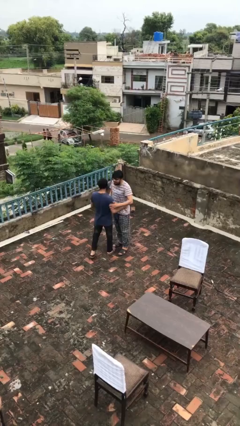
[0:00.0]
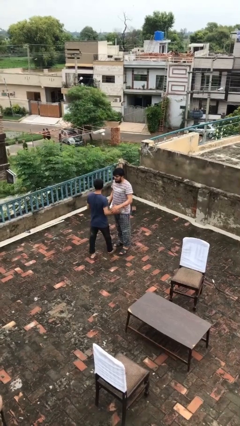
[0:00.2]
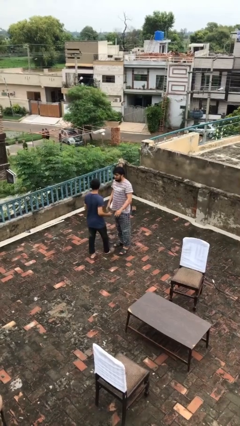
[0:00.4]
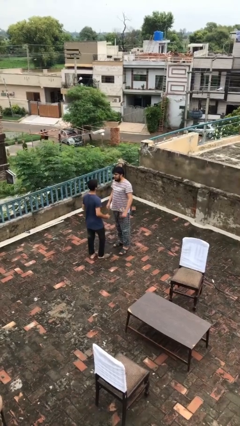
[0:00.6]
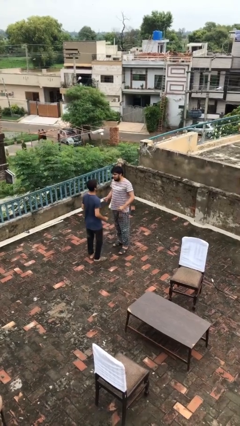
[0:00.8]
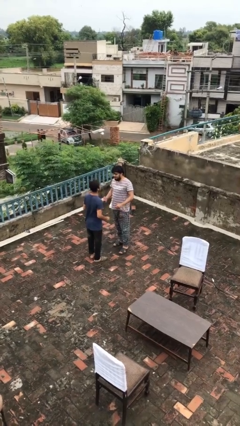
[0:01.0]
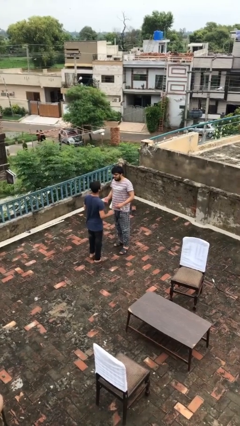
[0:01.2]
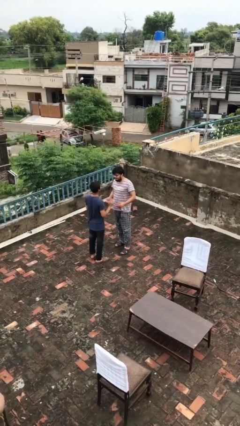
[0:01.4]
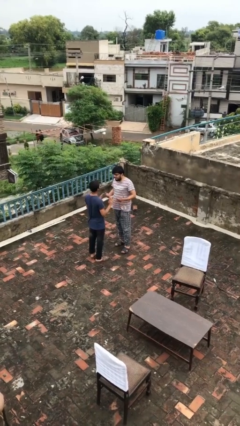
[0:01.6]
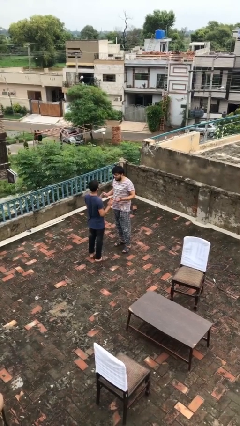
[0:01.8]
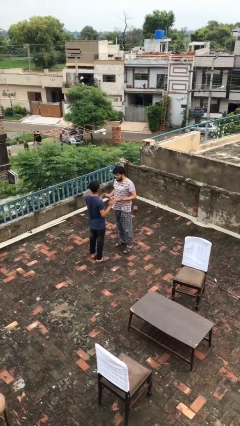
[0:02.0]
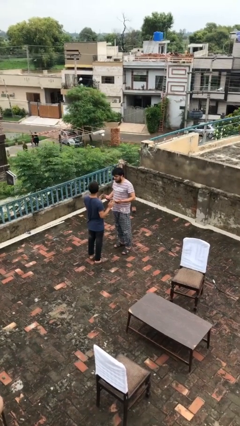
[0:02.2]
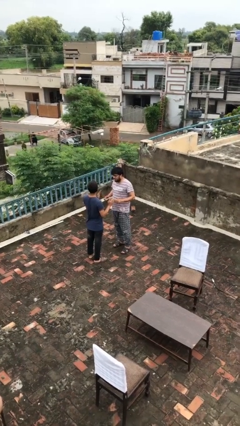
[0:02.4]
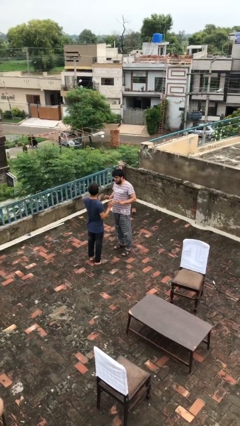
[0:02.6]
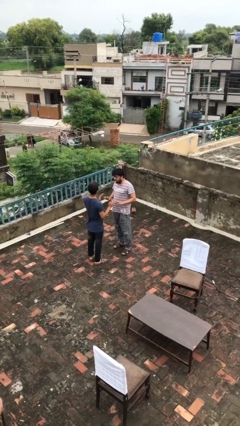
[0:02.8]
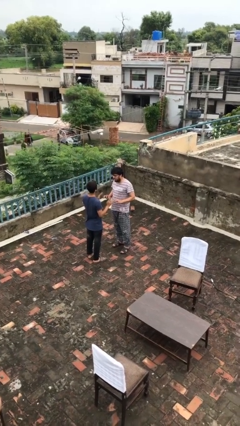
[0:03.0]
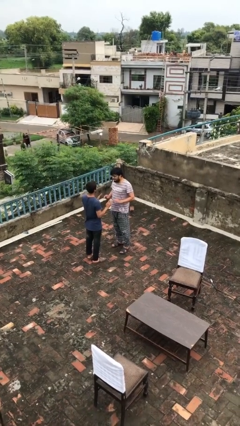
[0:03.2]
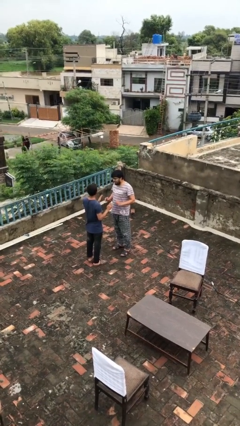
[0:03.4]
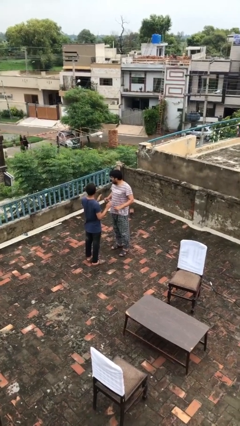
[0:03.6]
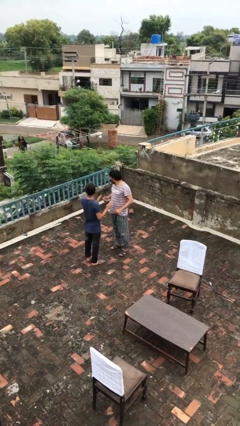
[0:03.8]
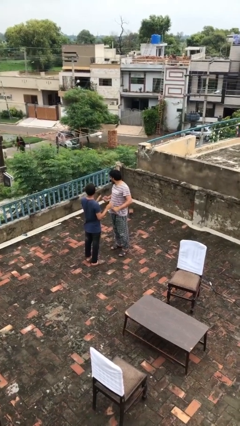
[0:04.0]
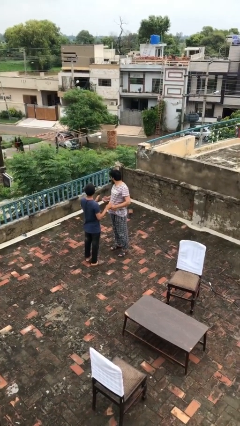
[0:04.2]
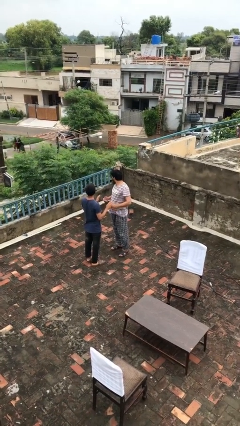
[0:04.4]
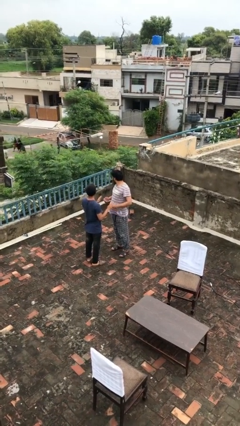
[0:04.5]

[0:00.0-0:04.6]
person talks to person

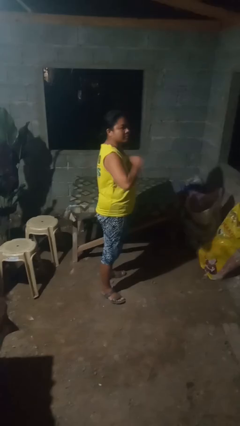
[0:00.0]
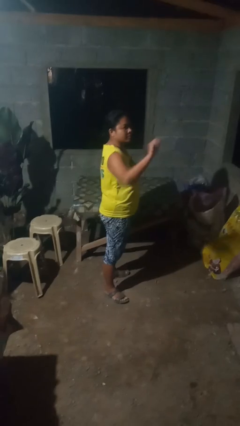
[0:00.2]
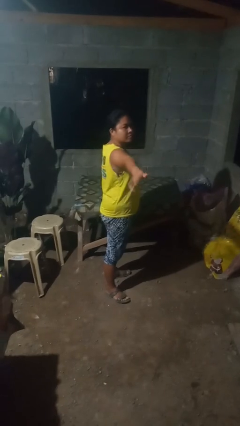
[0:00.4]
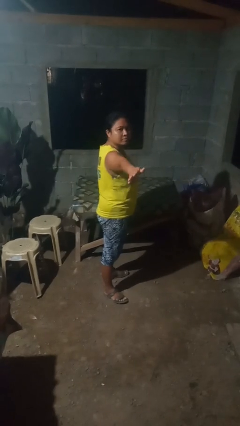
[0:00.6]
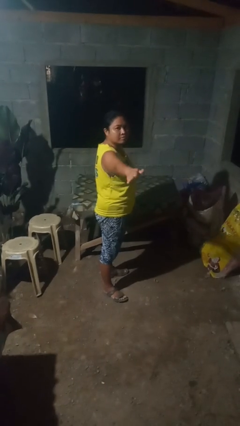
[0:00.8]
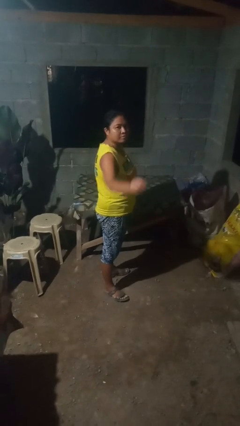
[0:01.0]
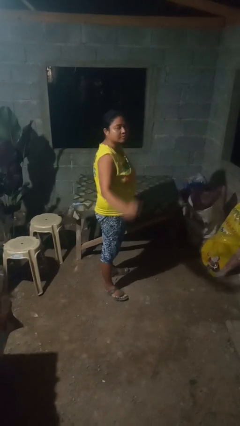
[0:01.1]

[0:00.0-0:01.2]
person karate chop

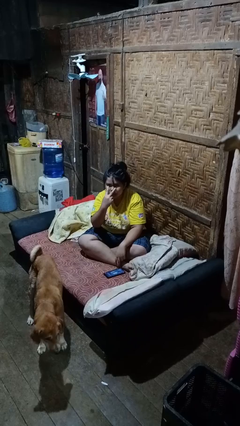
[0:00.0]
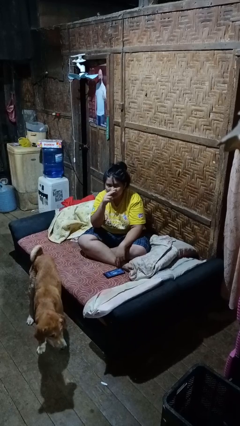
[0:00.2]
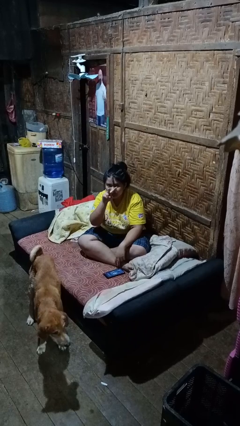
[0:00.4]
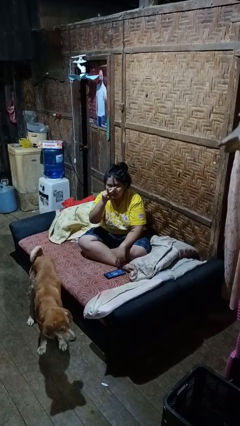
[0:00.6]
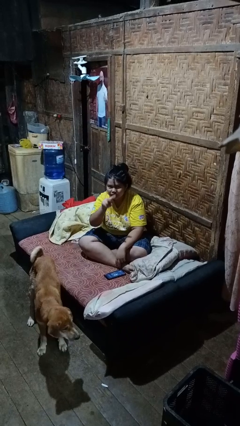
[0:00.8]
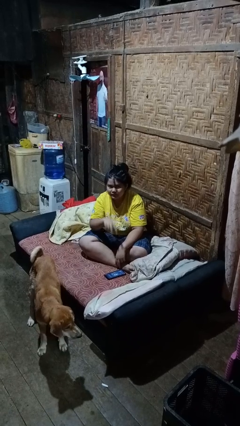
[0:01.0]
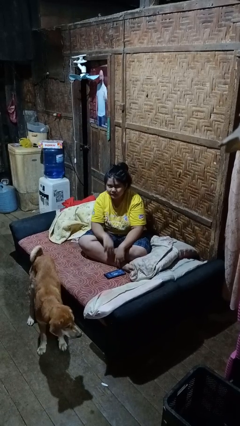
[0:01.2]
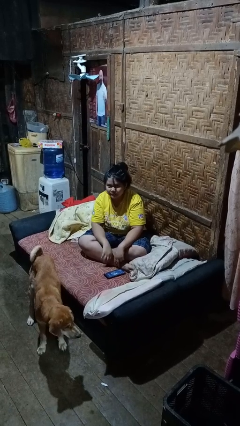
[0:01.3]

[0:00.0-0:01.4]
person gestures watch closely

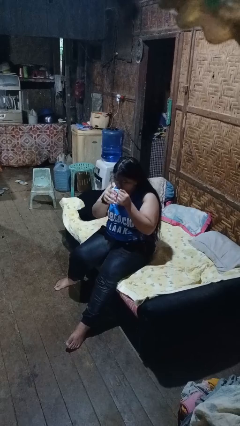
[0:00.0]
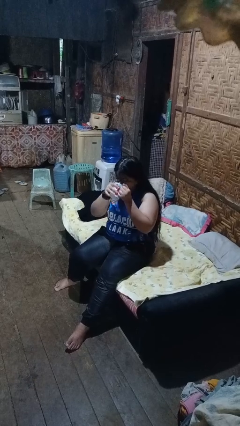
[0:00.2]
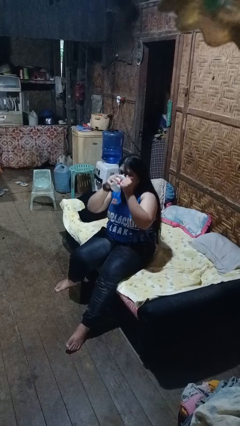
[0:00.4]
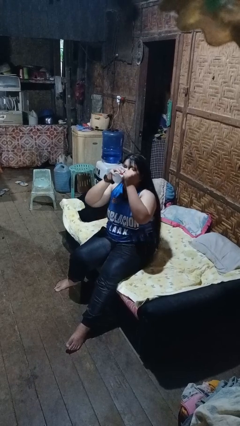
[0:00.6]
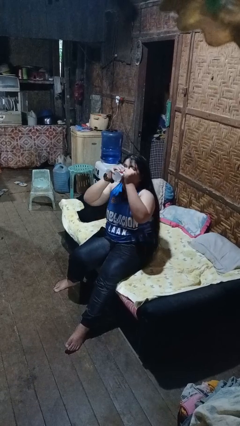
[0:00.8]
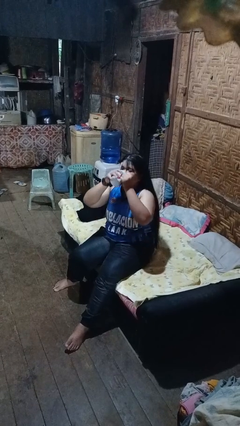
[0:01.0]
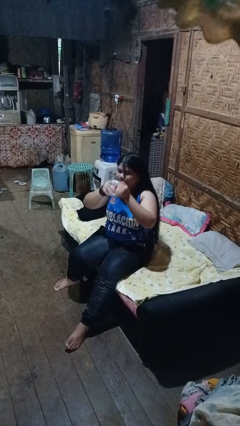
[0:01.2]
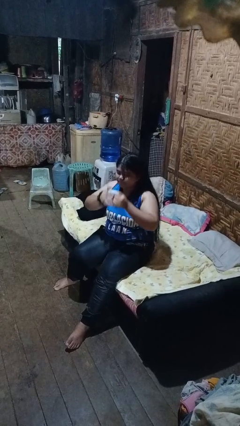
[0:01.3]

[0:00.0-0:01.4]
person drinks from mug

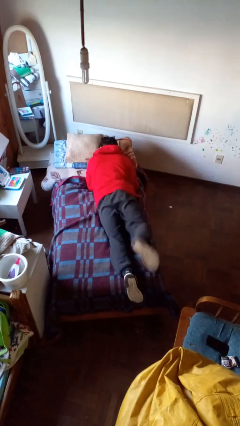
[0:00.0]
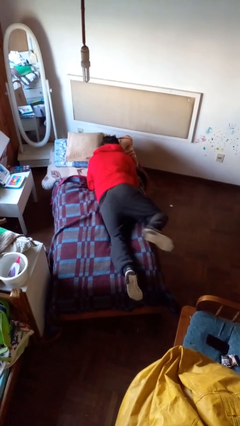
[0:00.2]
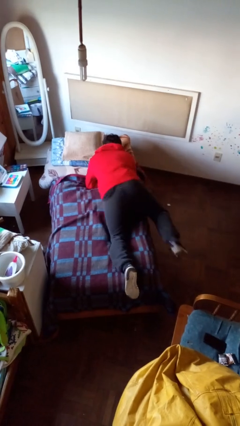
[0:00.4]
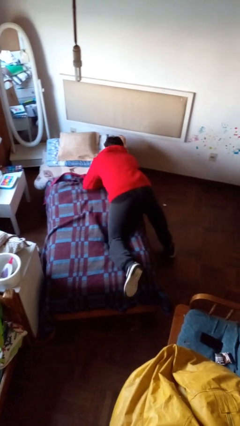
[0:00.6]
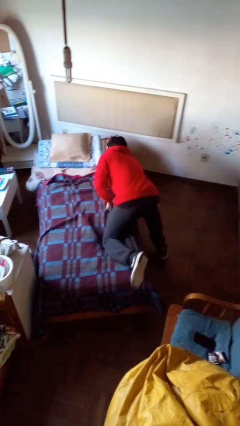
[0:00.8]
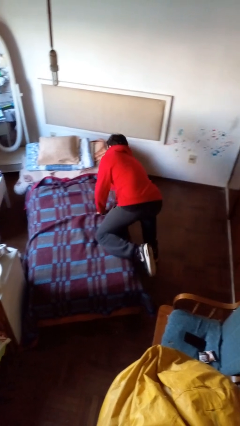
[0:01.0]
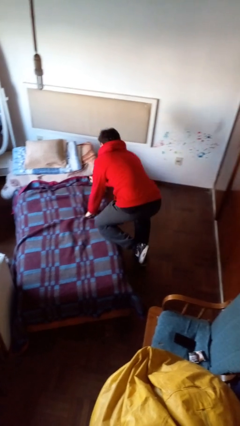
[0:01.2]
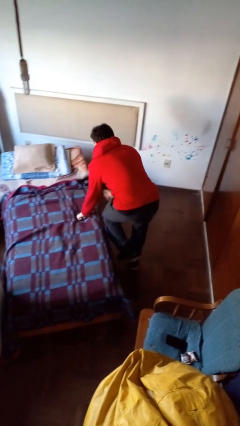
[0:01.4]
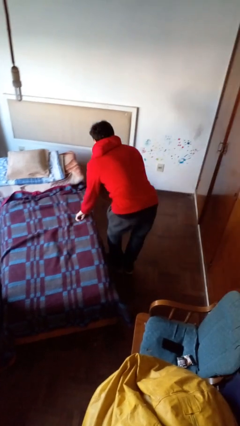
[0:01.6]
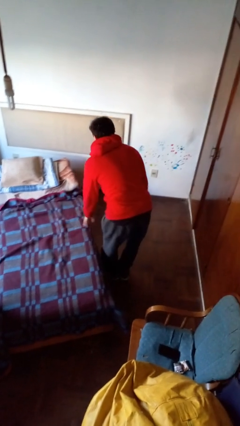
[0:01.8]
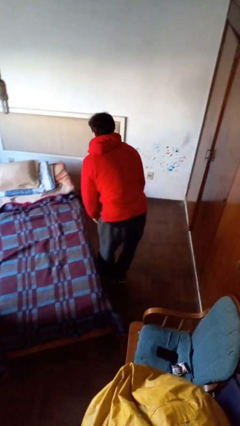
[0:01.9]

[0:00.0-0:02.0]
person stands up

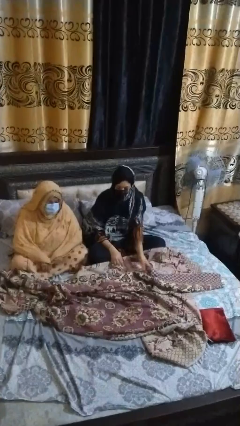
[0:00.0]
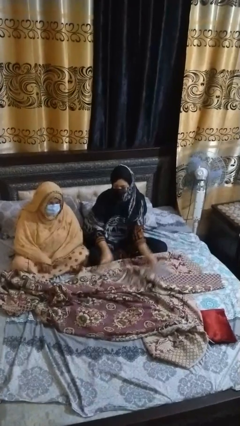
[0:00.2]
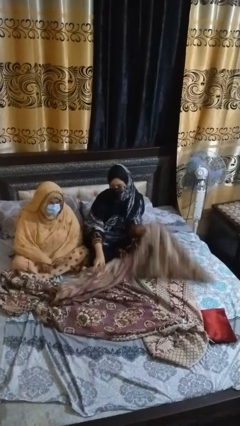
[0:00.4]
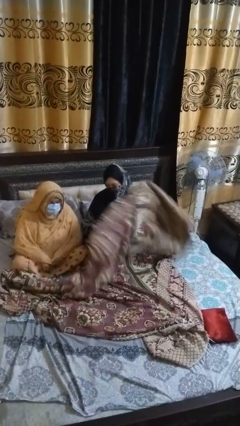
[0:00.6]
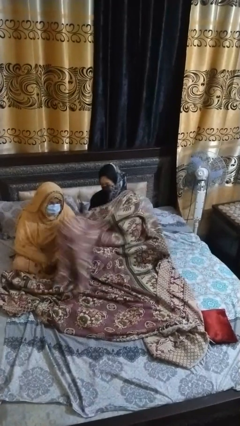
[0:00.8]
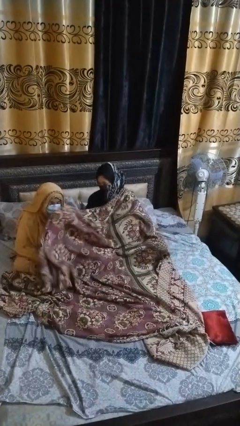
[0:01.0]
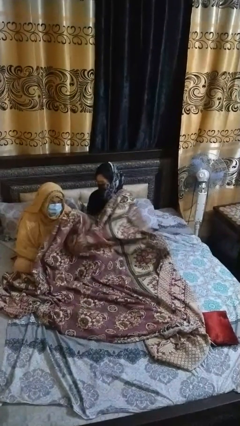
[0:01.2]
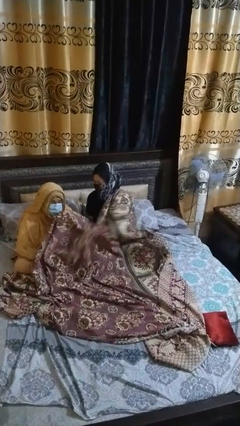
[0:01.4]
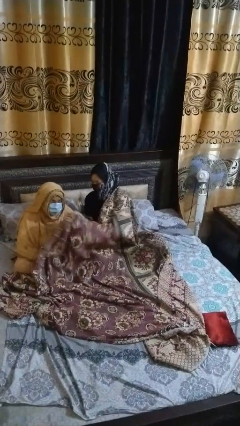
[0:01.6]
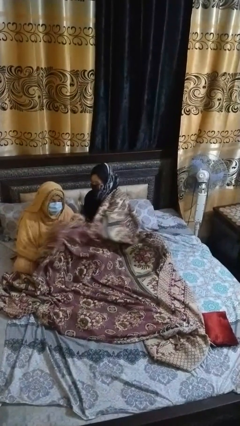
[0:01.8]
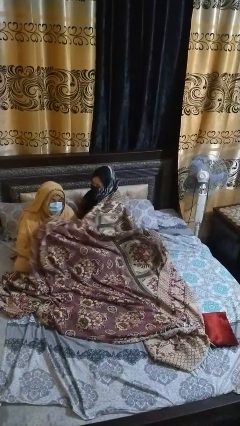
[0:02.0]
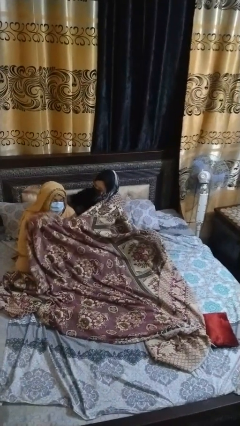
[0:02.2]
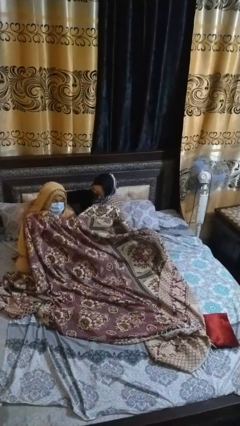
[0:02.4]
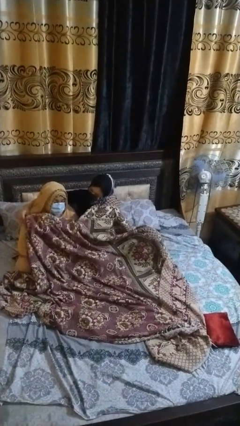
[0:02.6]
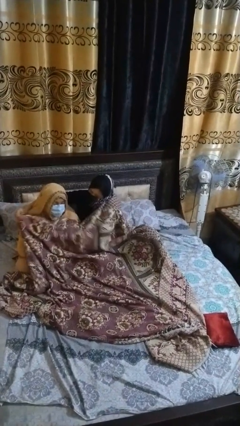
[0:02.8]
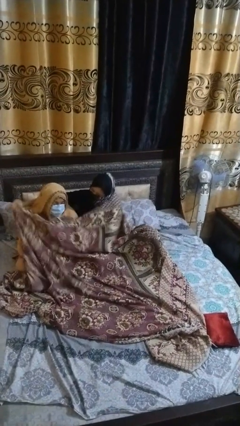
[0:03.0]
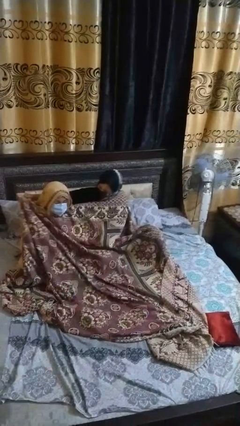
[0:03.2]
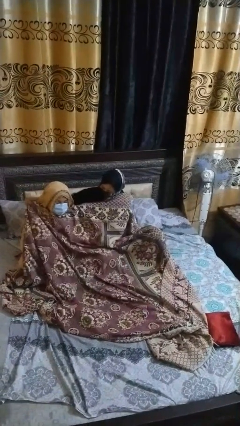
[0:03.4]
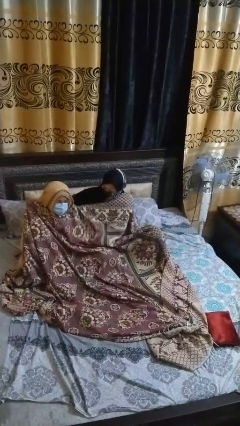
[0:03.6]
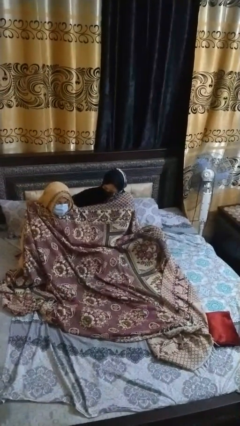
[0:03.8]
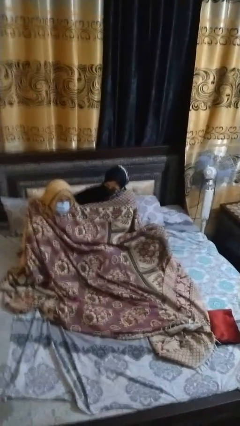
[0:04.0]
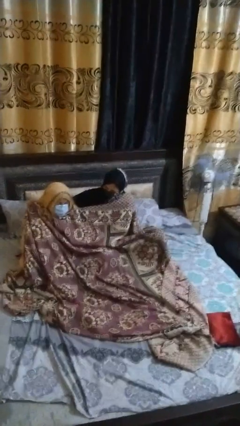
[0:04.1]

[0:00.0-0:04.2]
person covers friend with blanket

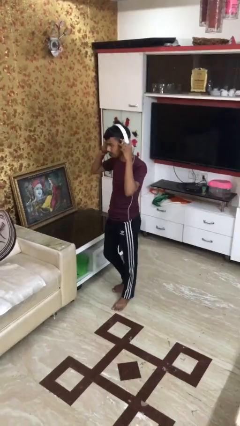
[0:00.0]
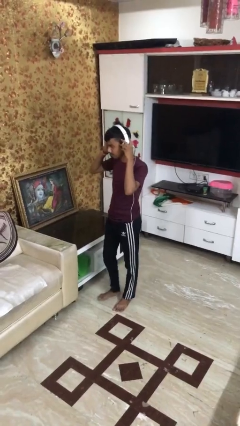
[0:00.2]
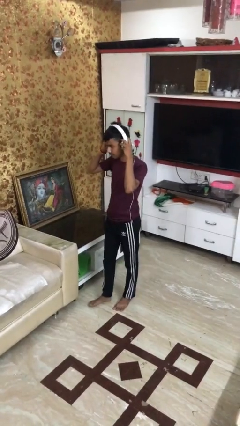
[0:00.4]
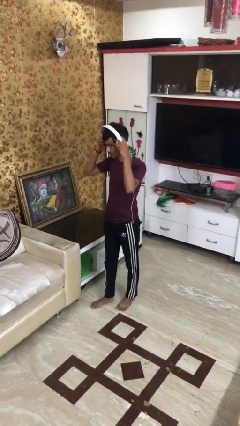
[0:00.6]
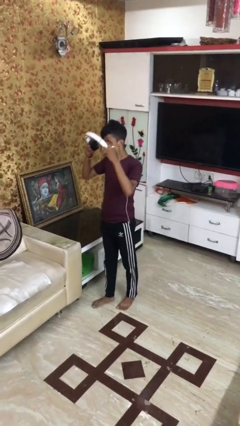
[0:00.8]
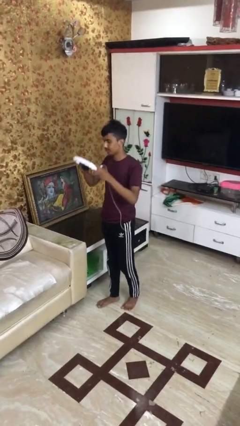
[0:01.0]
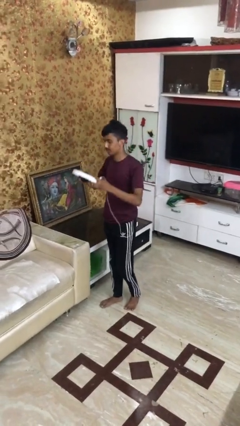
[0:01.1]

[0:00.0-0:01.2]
person takes off headphones

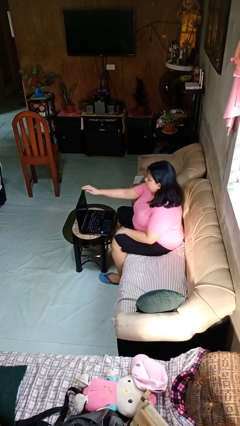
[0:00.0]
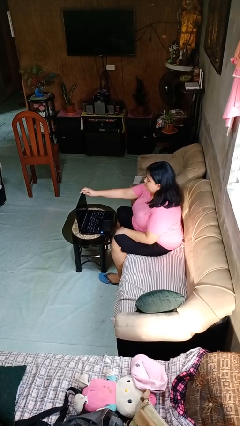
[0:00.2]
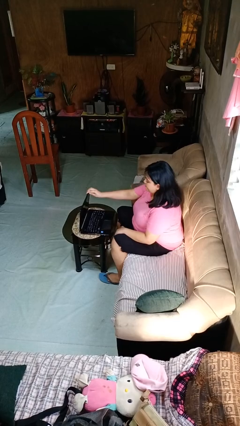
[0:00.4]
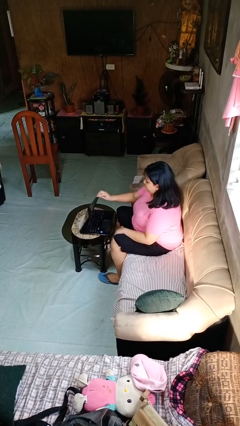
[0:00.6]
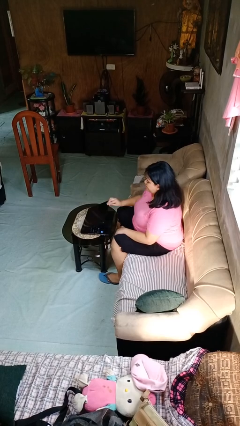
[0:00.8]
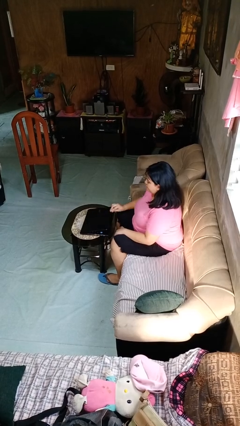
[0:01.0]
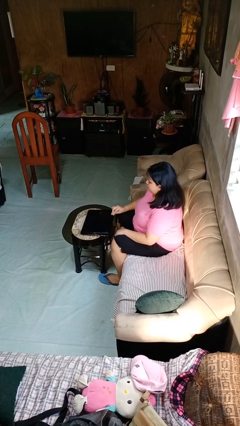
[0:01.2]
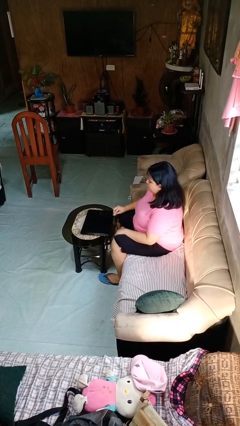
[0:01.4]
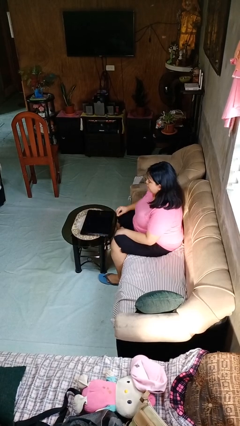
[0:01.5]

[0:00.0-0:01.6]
person closes laptop
